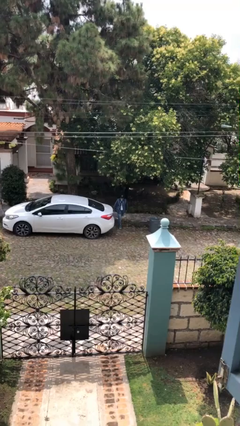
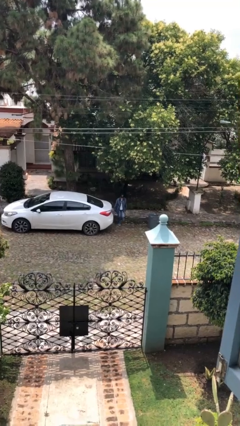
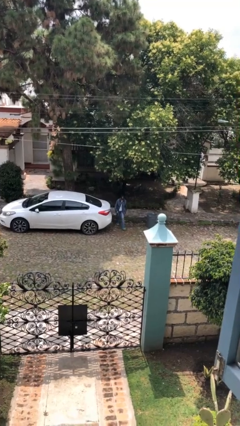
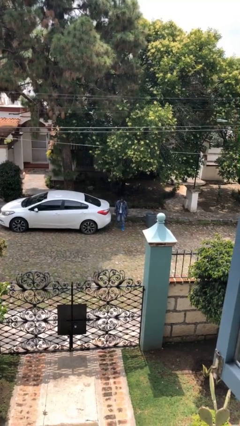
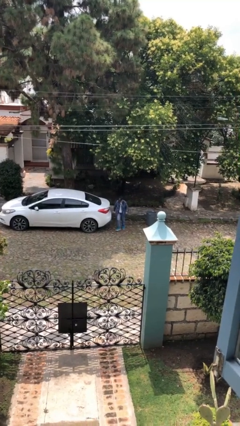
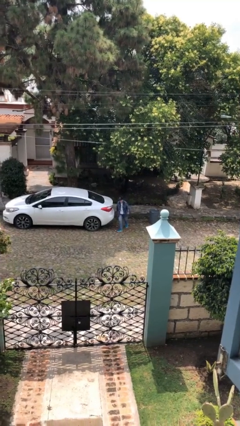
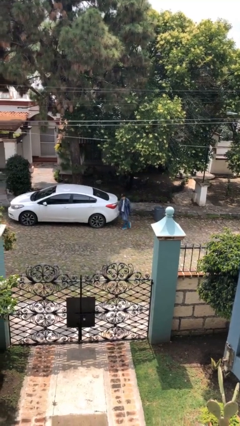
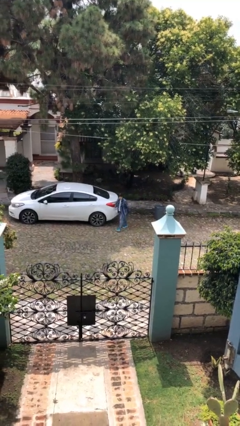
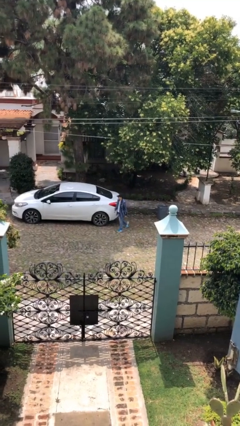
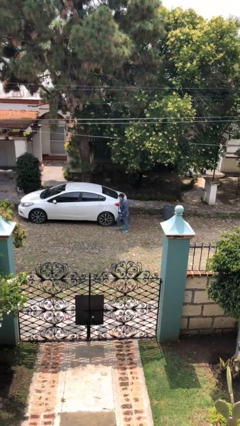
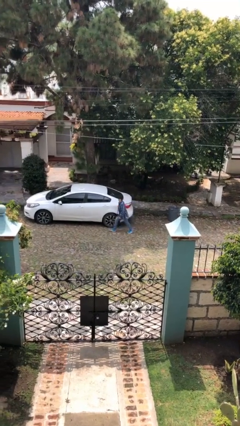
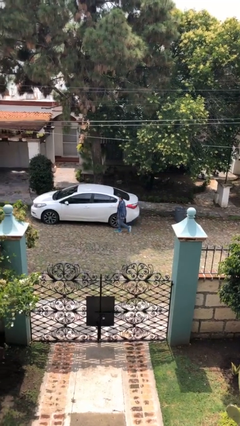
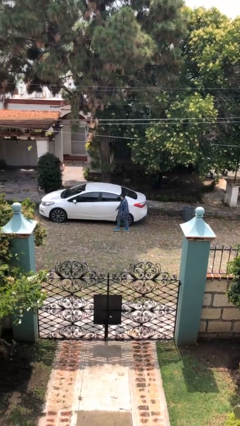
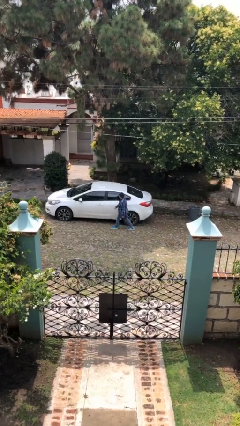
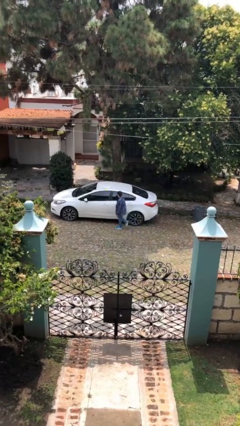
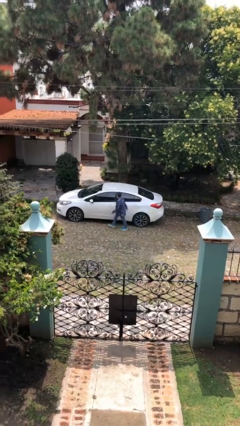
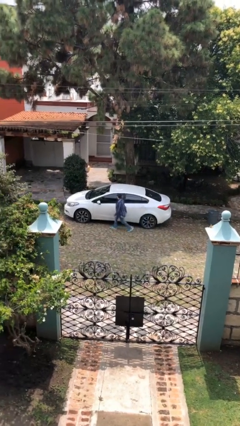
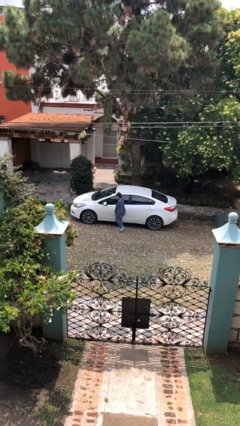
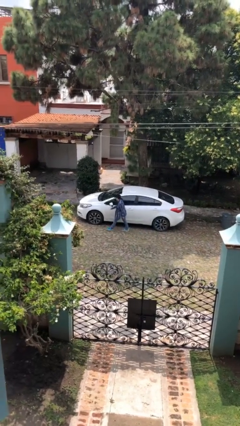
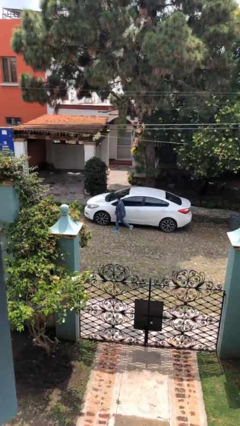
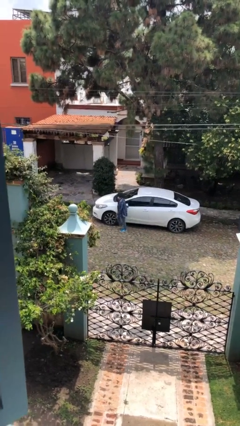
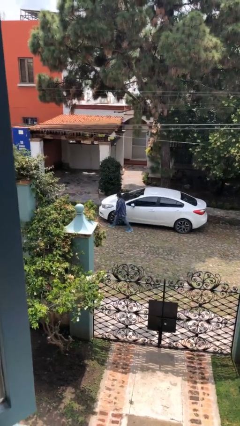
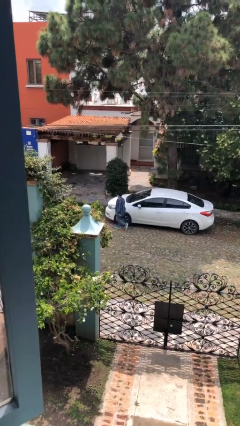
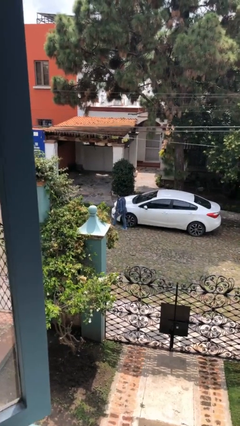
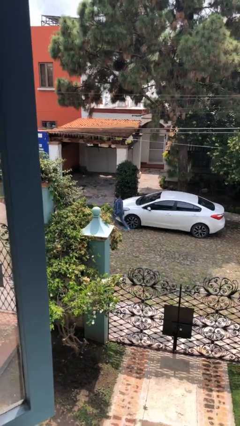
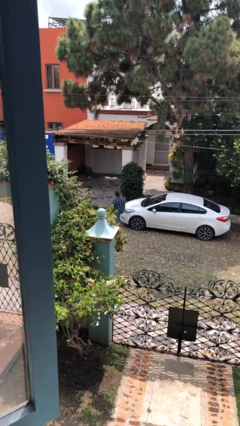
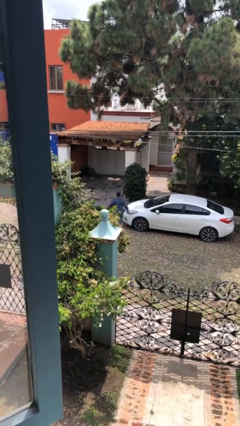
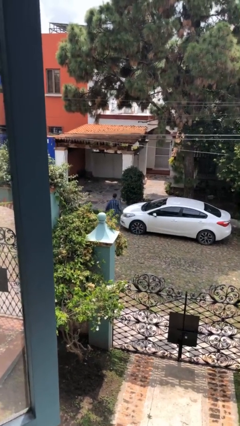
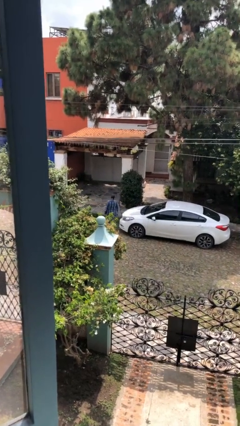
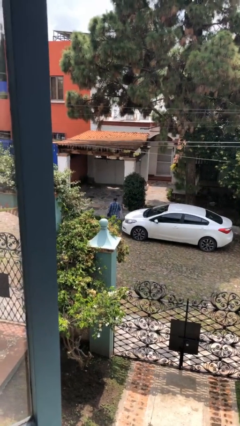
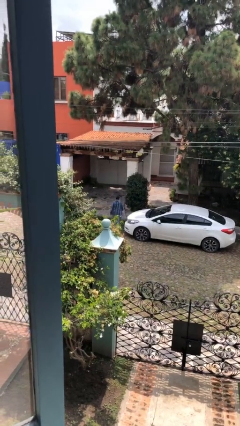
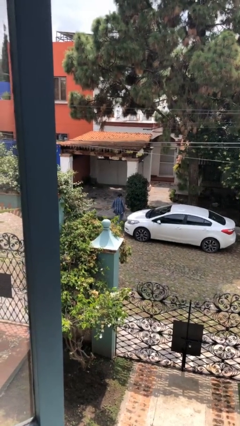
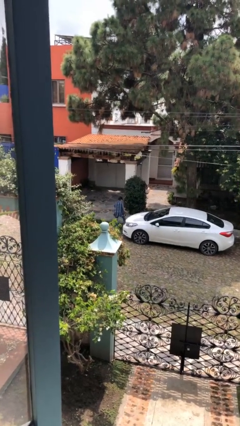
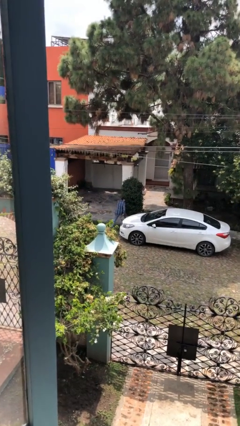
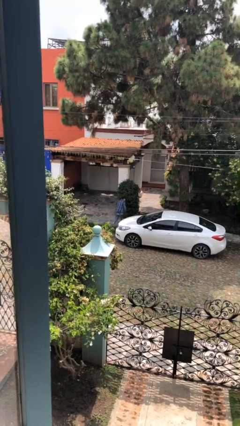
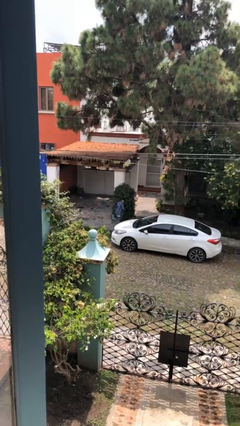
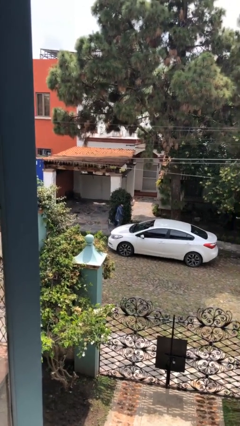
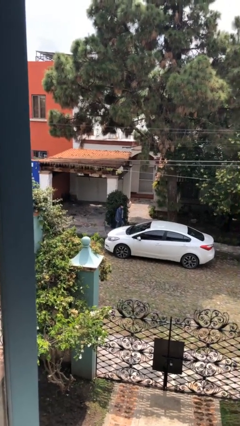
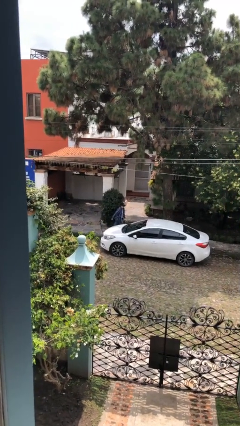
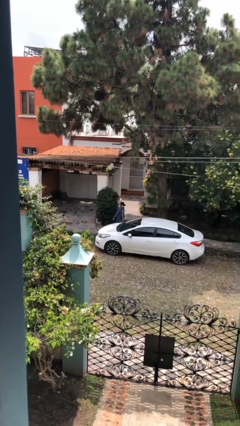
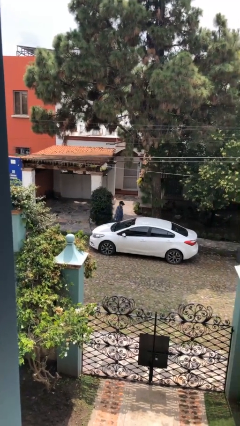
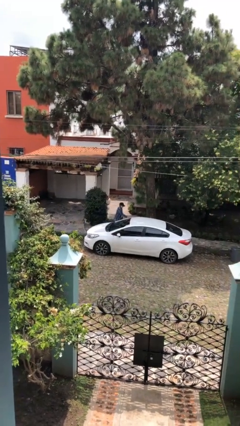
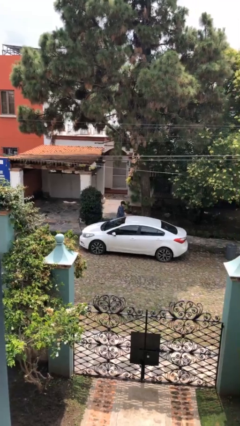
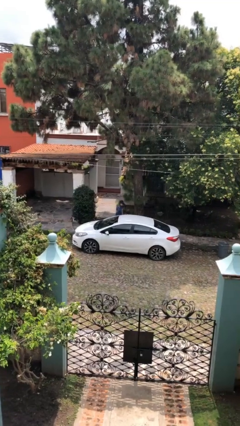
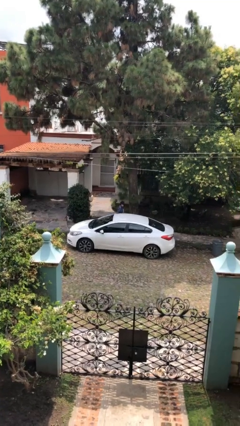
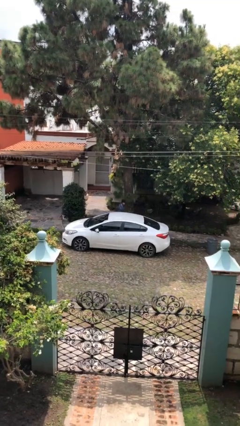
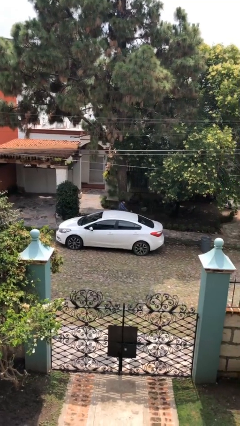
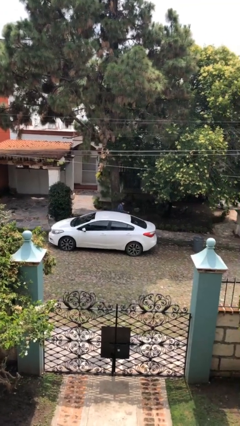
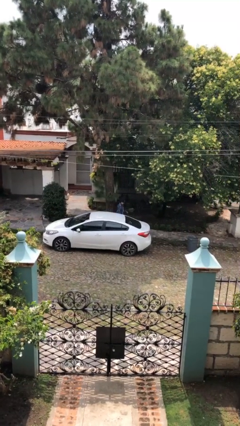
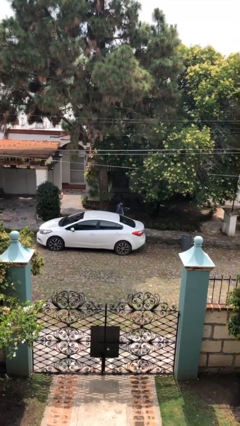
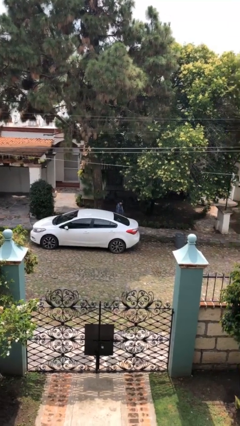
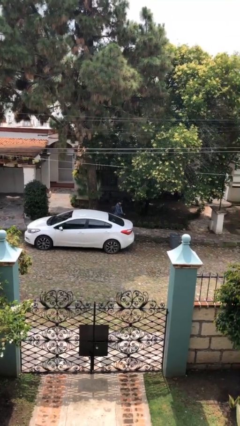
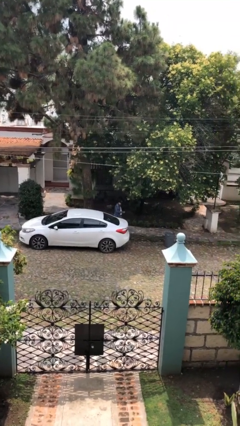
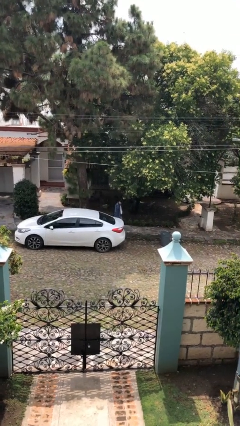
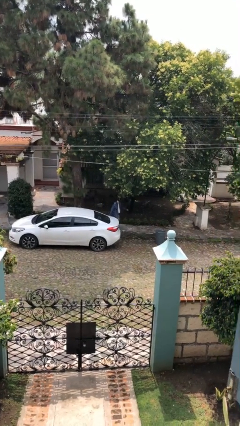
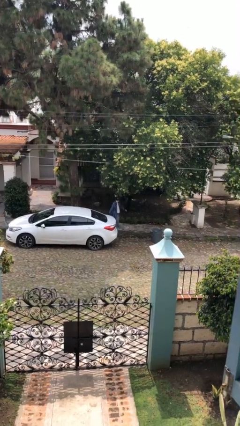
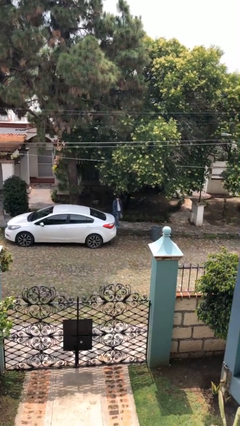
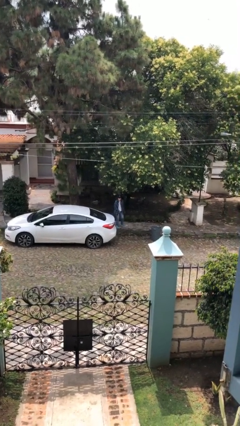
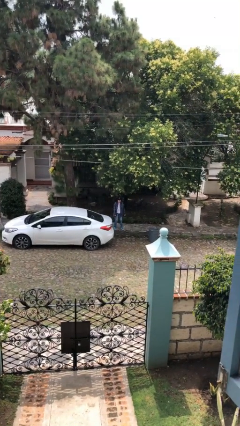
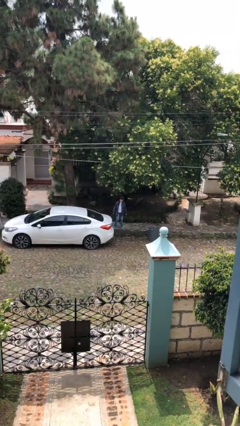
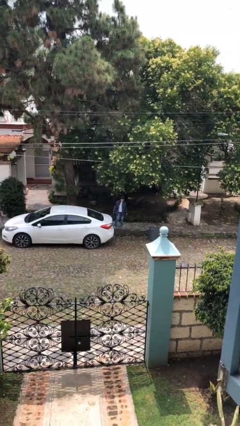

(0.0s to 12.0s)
person walks around car

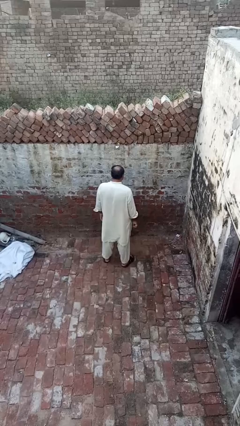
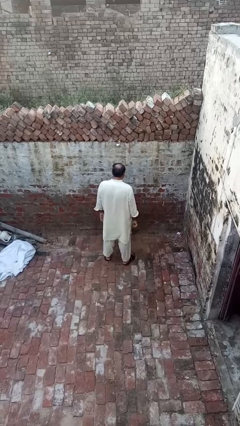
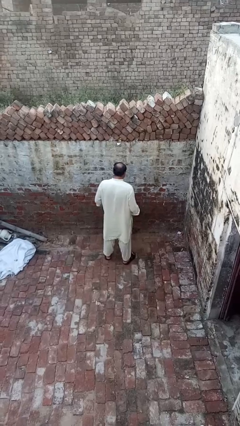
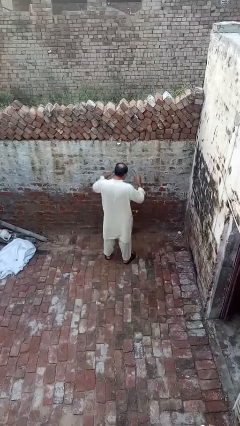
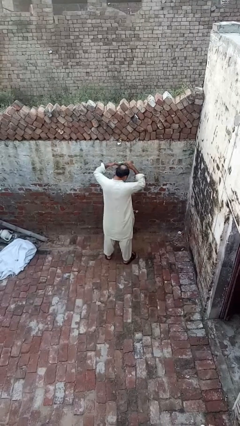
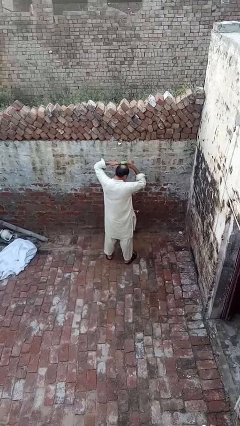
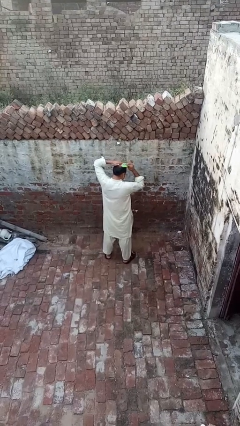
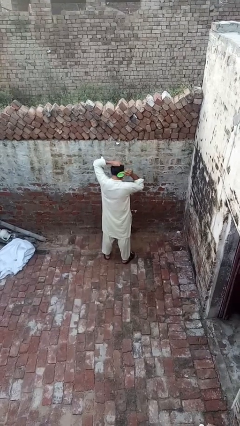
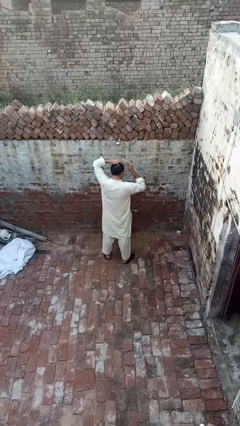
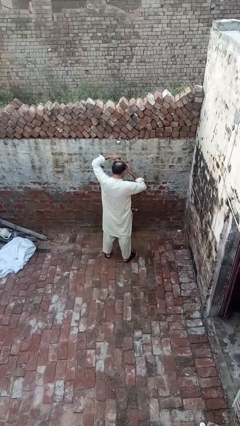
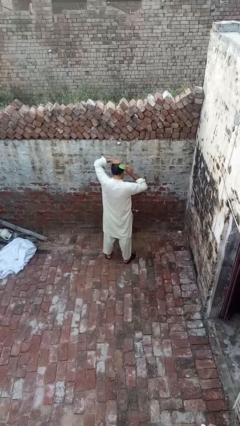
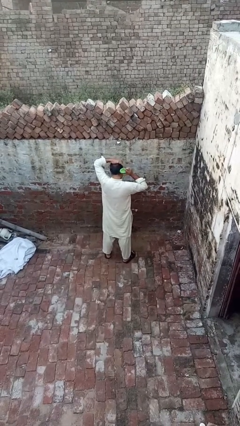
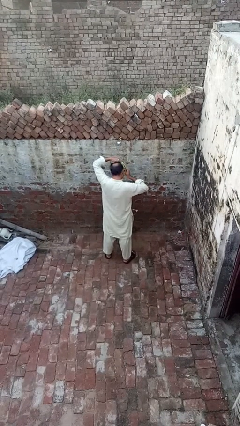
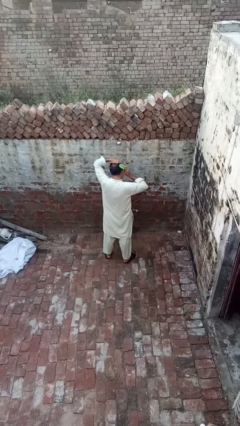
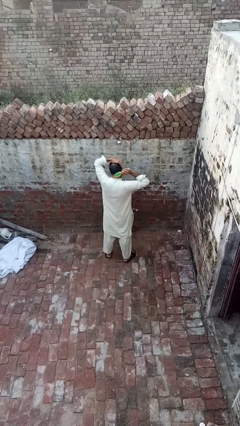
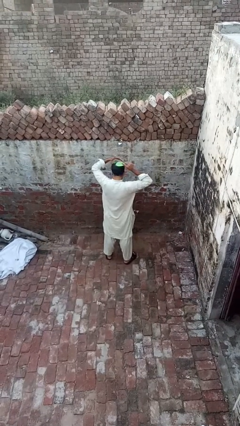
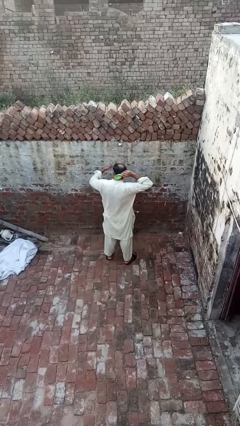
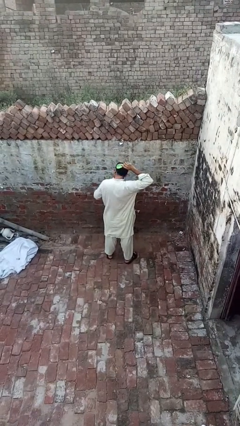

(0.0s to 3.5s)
person brushes hair

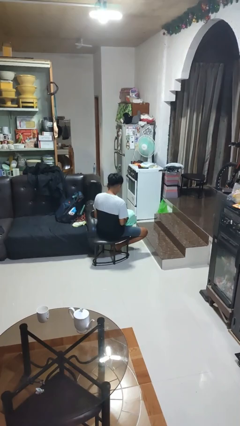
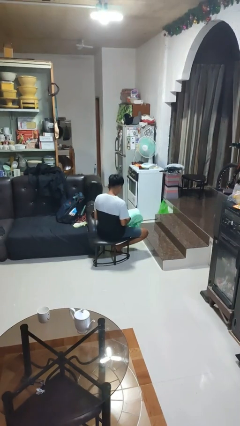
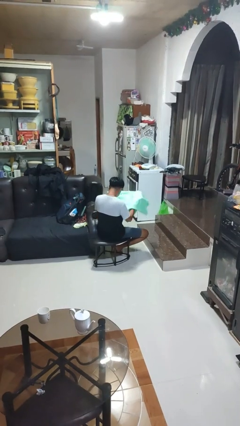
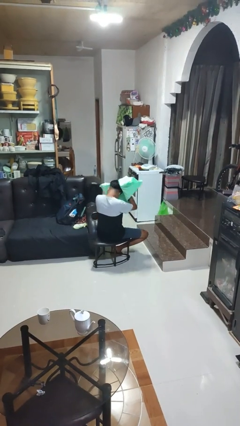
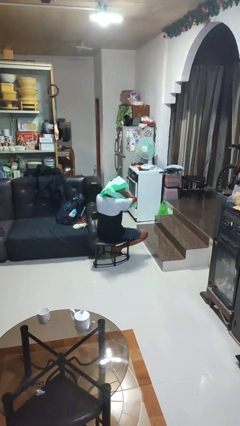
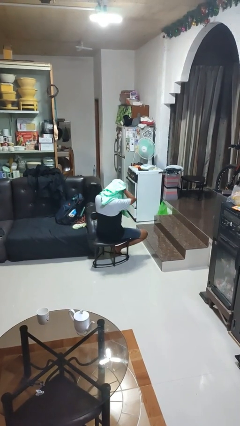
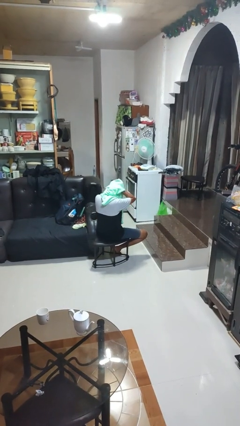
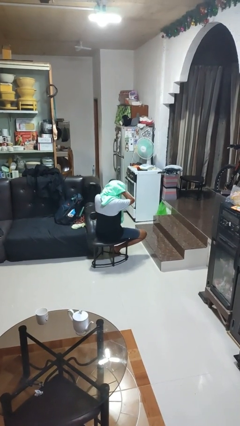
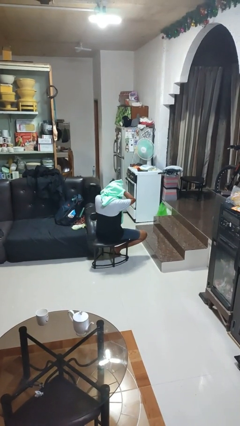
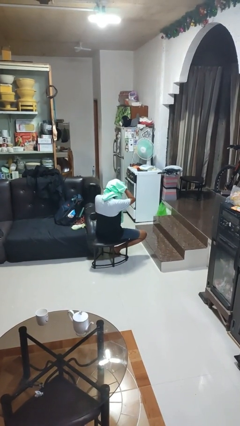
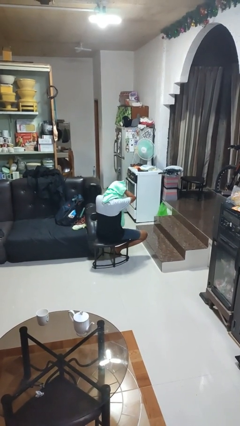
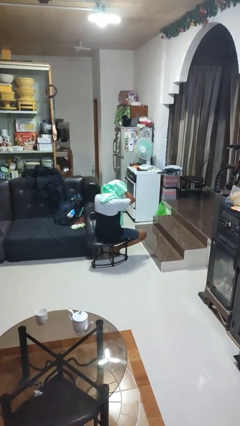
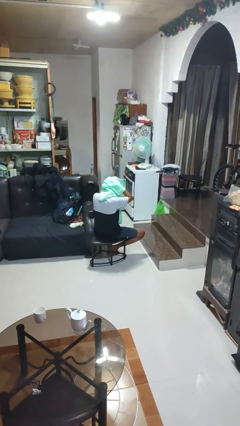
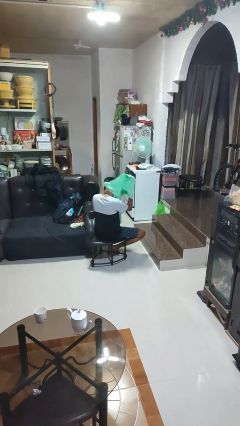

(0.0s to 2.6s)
person dries hair with towel

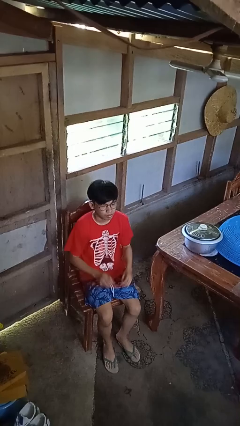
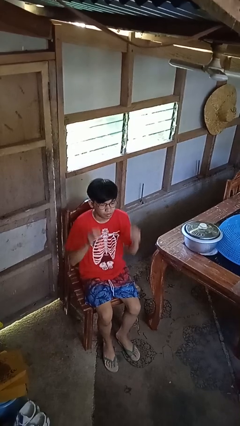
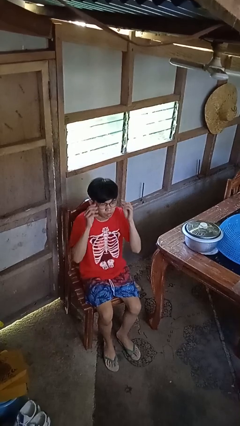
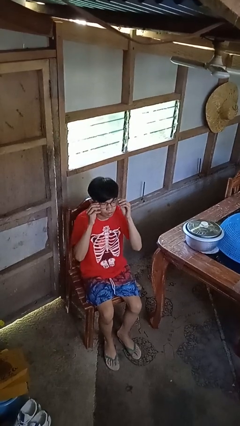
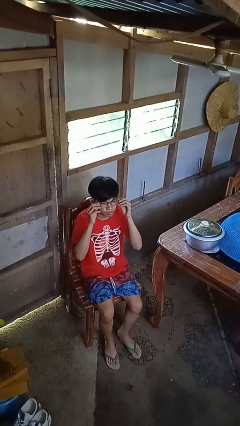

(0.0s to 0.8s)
person takes off glasses
